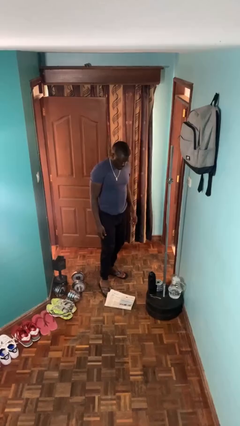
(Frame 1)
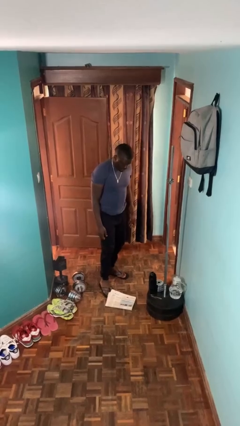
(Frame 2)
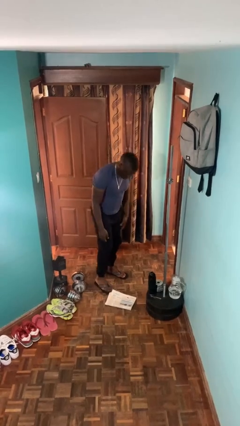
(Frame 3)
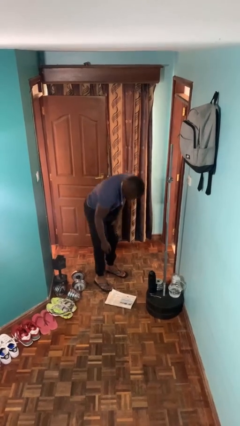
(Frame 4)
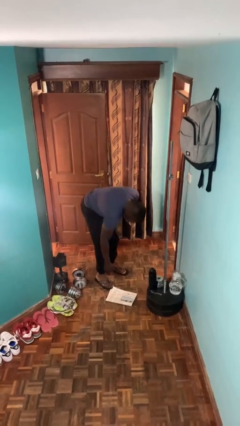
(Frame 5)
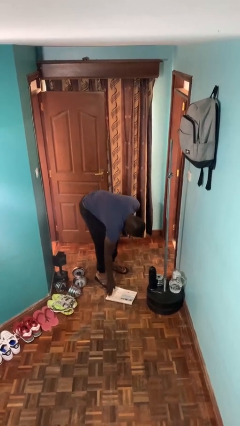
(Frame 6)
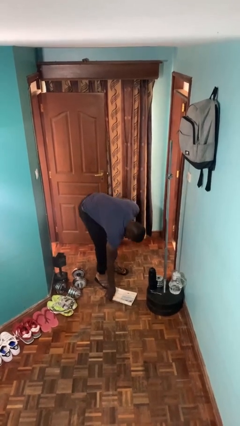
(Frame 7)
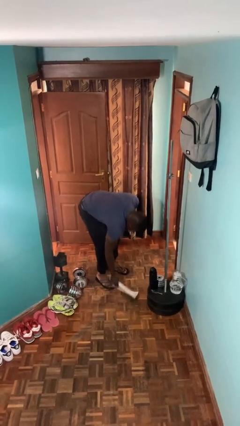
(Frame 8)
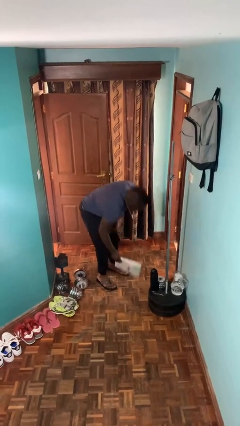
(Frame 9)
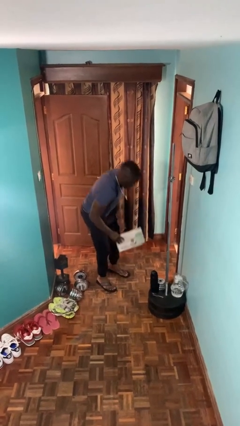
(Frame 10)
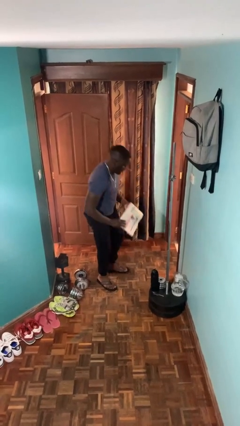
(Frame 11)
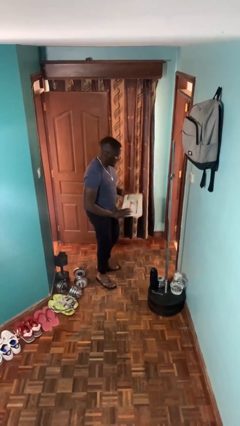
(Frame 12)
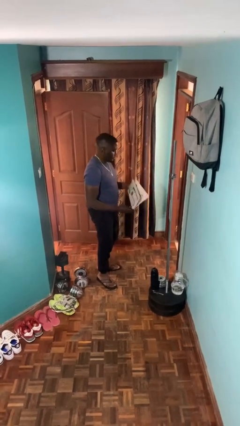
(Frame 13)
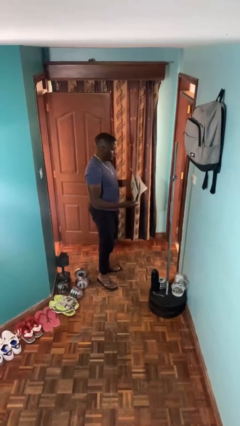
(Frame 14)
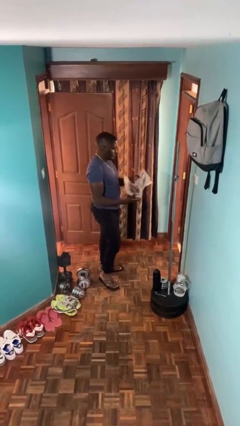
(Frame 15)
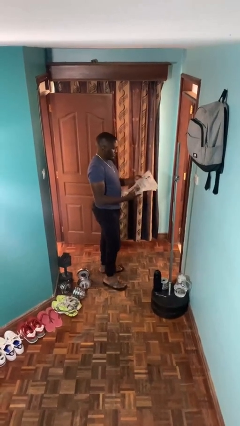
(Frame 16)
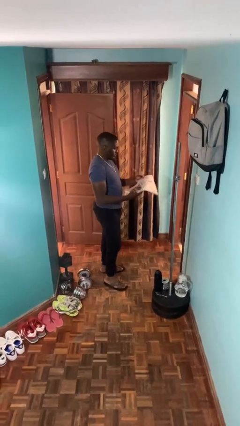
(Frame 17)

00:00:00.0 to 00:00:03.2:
person picks up object from floor

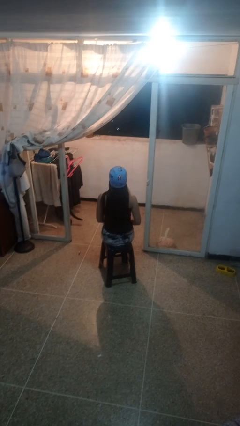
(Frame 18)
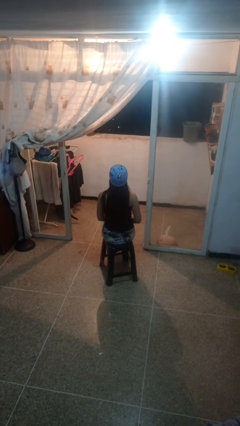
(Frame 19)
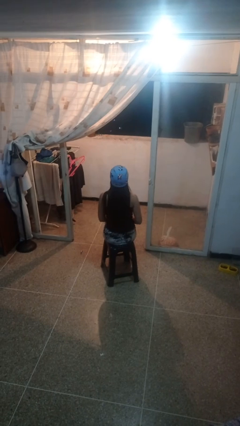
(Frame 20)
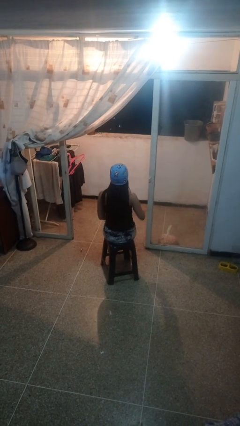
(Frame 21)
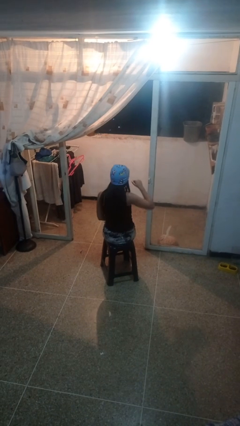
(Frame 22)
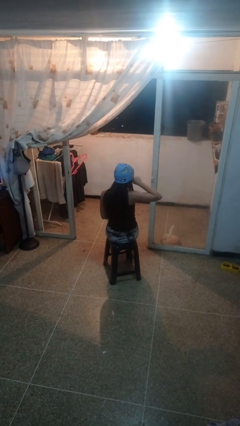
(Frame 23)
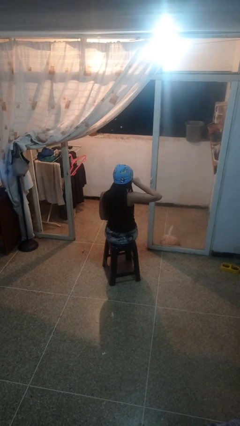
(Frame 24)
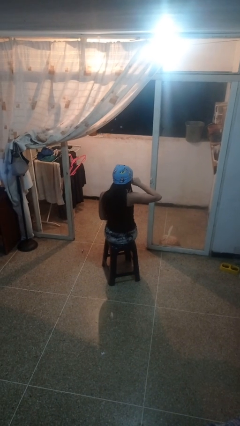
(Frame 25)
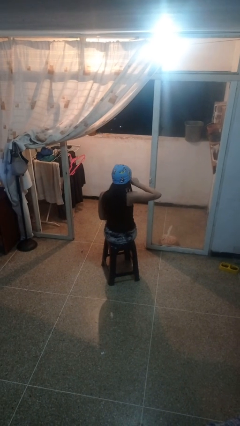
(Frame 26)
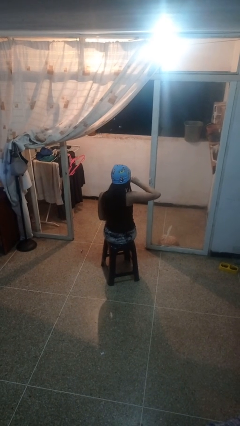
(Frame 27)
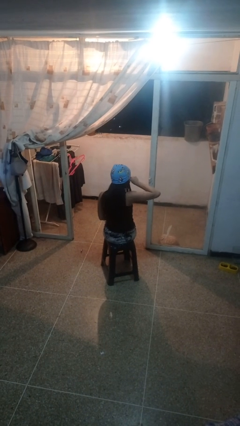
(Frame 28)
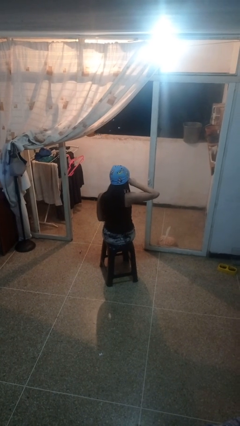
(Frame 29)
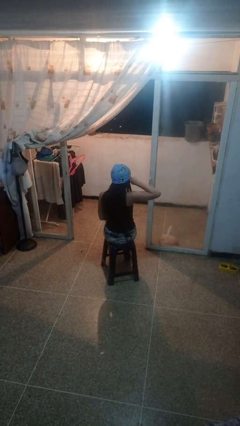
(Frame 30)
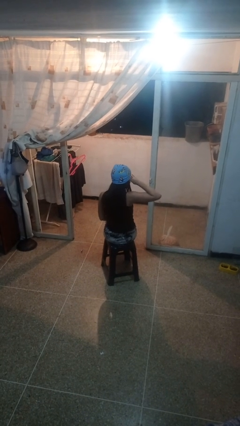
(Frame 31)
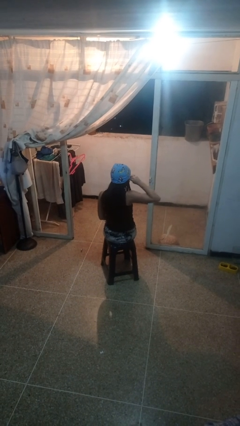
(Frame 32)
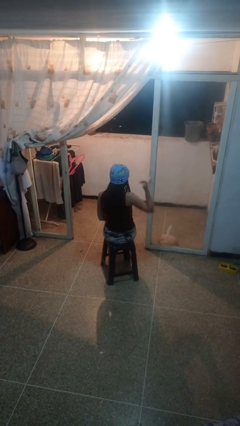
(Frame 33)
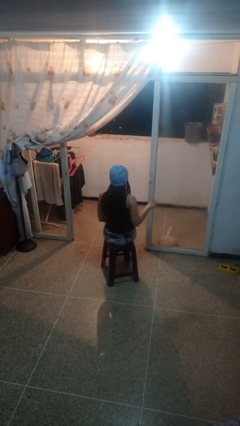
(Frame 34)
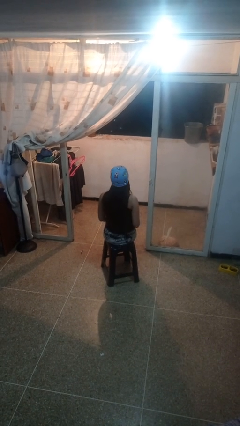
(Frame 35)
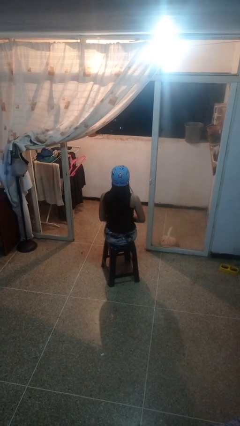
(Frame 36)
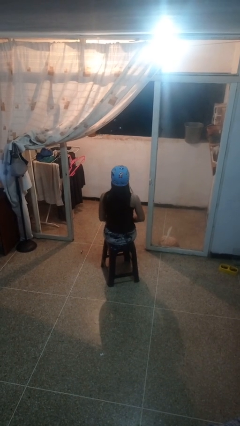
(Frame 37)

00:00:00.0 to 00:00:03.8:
person rubs eyes

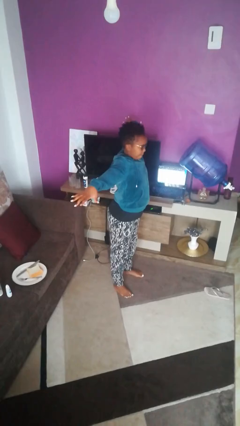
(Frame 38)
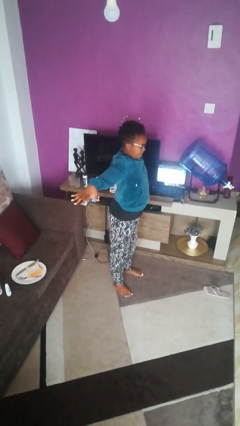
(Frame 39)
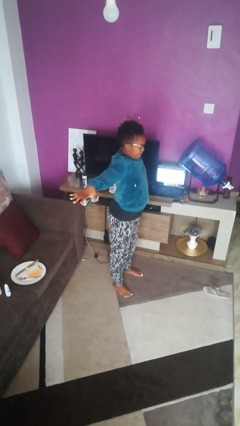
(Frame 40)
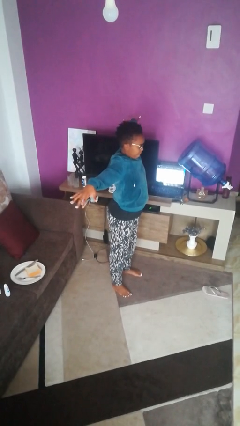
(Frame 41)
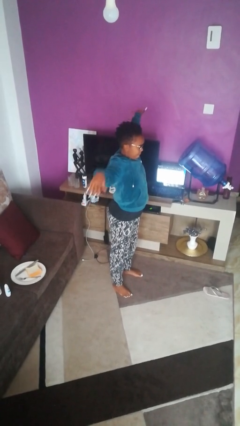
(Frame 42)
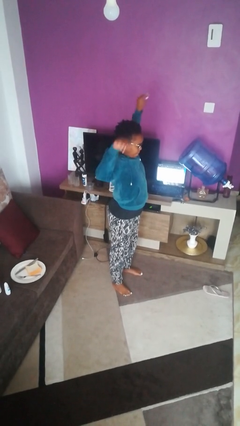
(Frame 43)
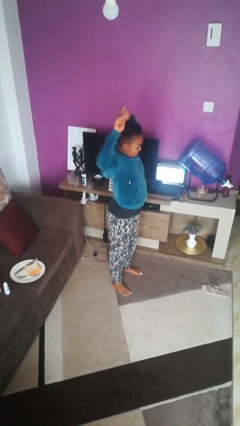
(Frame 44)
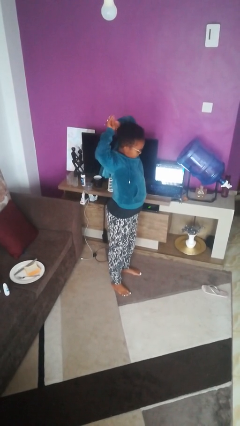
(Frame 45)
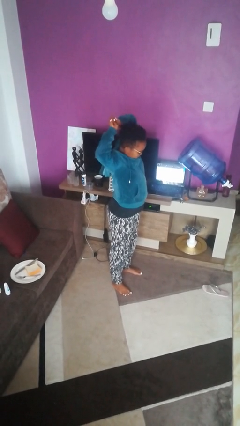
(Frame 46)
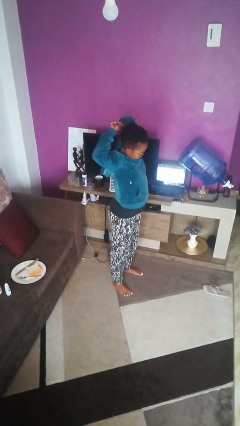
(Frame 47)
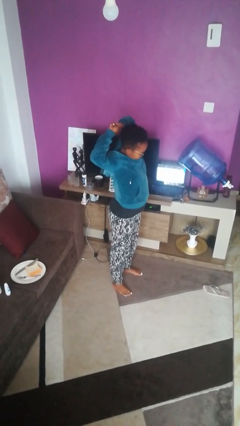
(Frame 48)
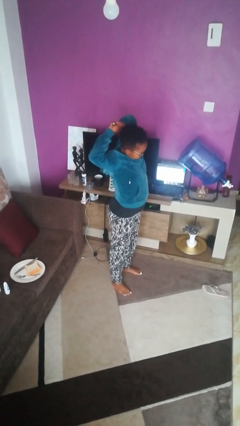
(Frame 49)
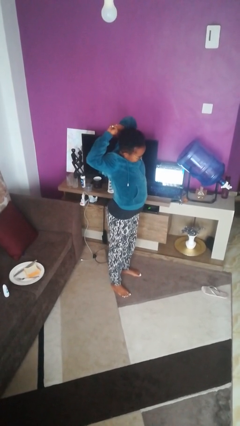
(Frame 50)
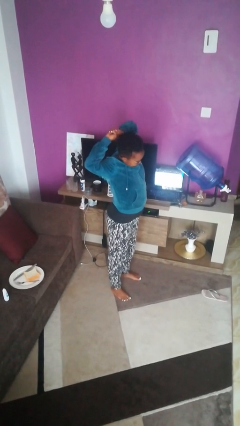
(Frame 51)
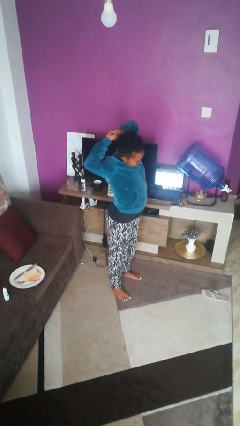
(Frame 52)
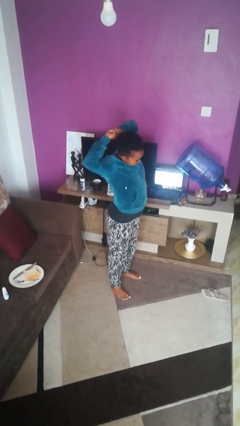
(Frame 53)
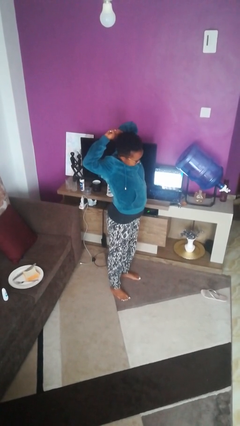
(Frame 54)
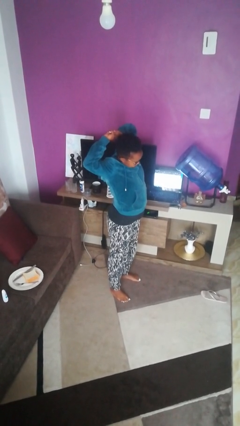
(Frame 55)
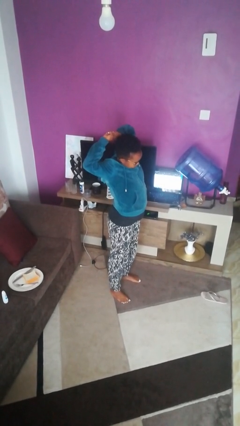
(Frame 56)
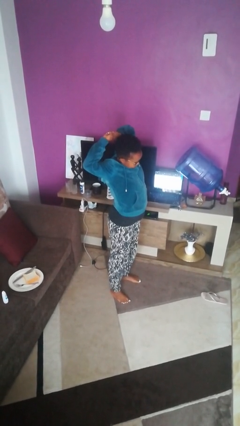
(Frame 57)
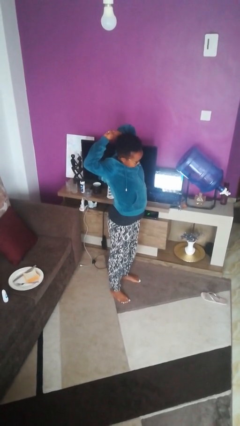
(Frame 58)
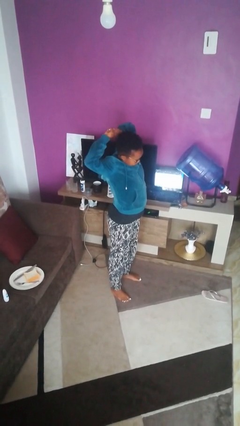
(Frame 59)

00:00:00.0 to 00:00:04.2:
person stretches arms over head

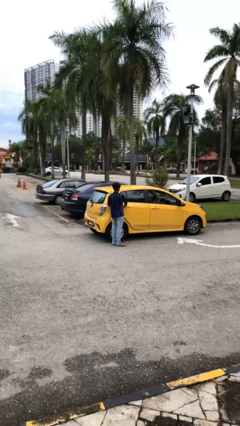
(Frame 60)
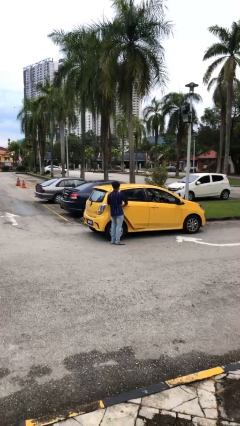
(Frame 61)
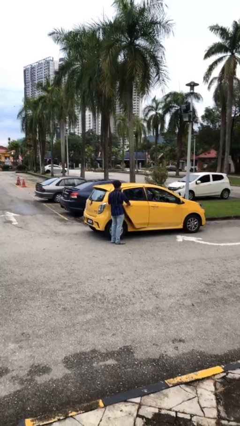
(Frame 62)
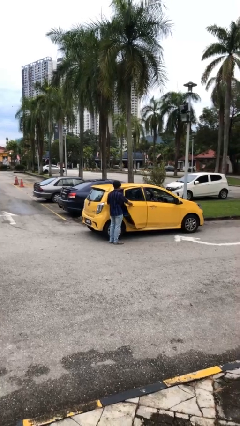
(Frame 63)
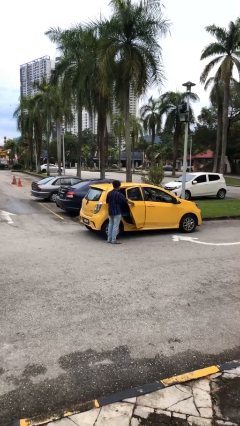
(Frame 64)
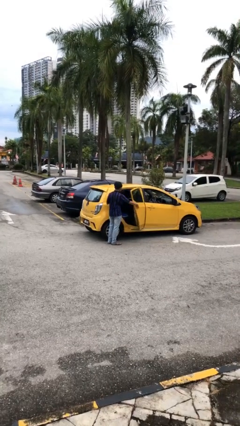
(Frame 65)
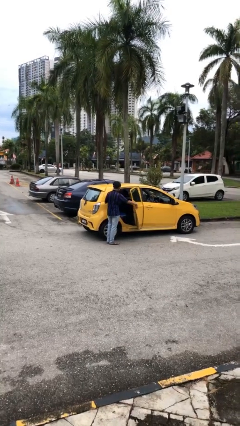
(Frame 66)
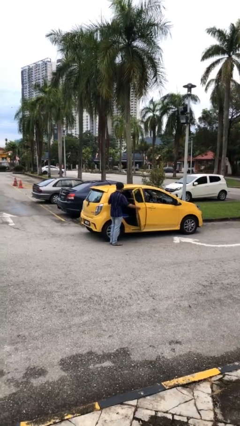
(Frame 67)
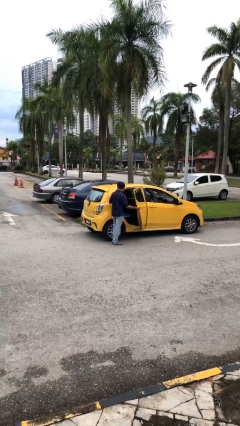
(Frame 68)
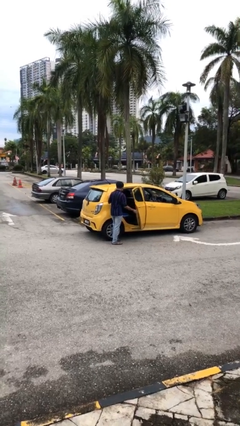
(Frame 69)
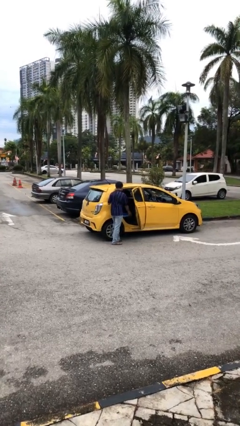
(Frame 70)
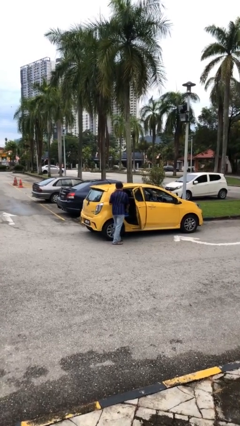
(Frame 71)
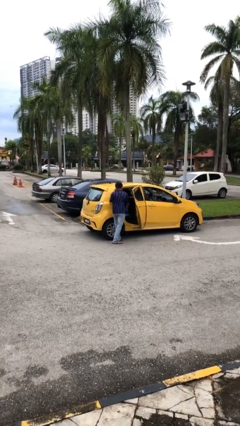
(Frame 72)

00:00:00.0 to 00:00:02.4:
person opens car door

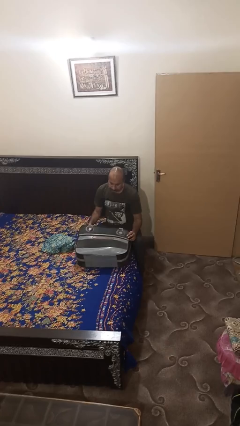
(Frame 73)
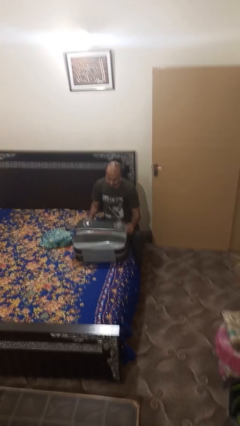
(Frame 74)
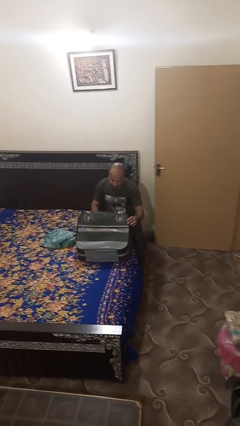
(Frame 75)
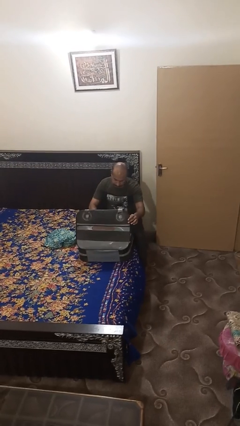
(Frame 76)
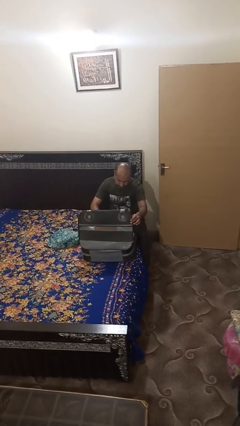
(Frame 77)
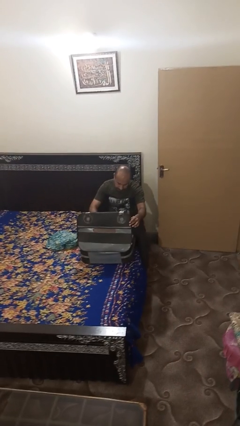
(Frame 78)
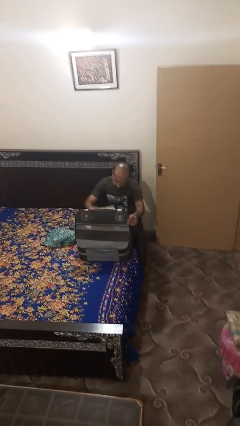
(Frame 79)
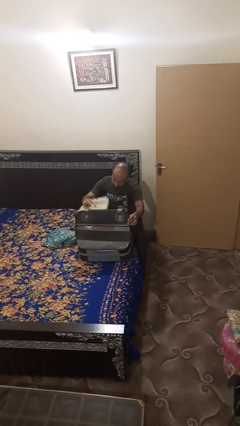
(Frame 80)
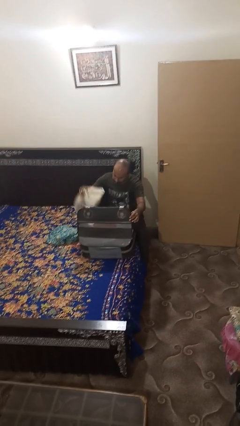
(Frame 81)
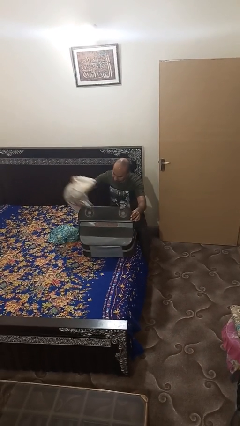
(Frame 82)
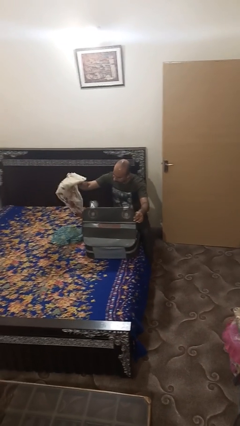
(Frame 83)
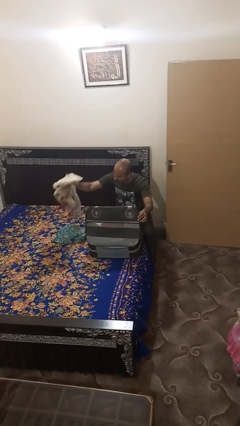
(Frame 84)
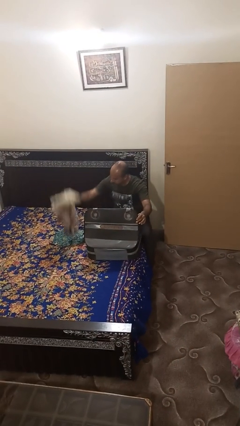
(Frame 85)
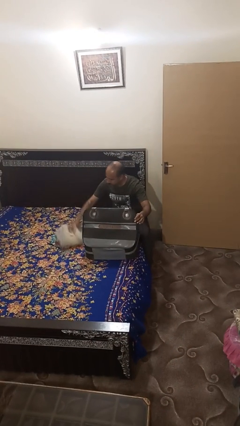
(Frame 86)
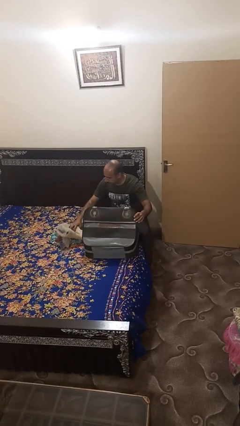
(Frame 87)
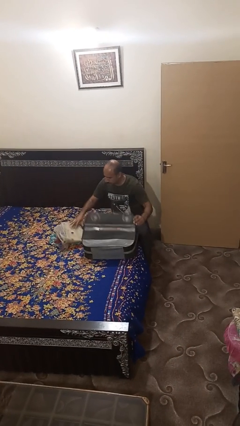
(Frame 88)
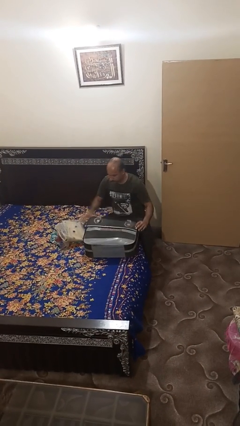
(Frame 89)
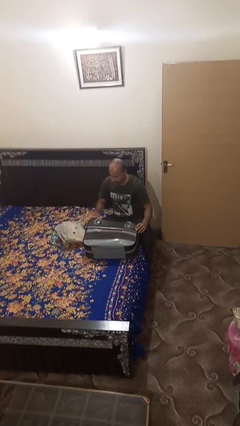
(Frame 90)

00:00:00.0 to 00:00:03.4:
person unloads clothes from suitcase

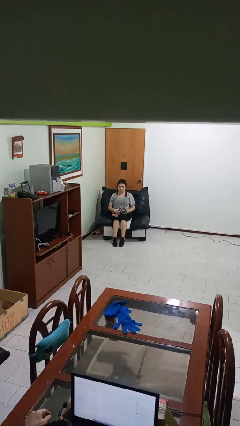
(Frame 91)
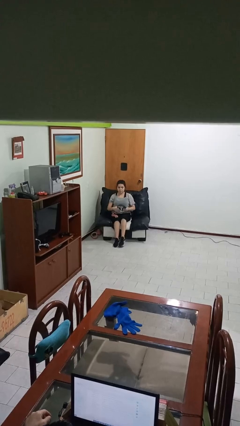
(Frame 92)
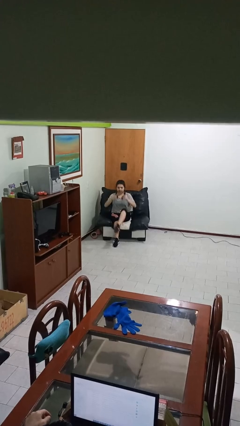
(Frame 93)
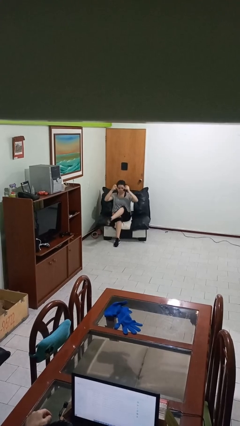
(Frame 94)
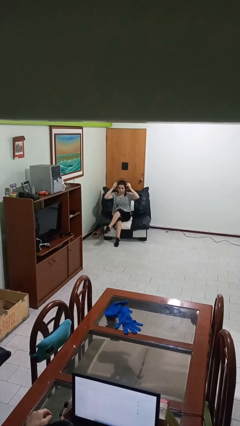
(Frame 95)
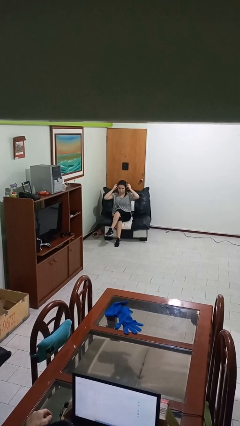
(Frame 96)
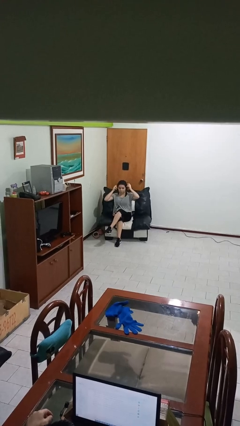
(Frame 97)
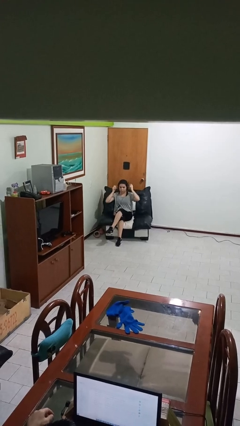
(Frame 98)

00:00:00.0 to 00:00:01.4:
person puts on headphones
